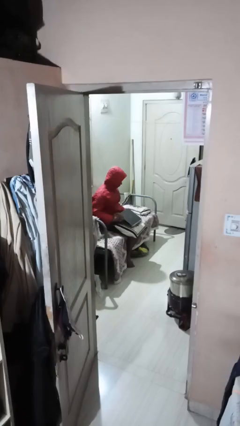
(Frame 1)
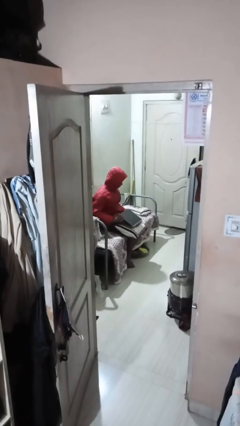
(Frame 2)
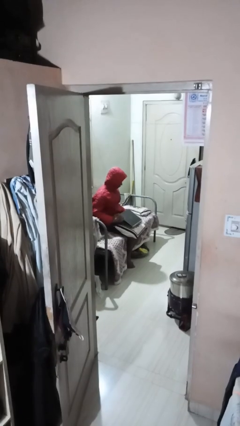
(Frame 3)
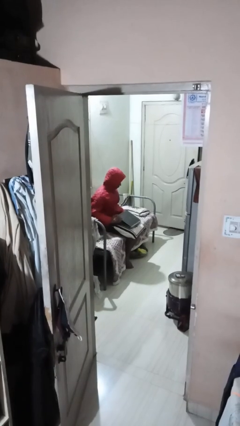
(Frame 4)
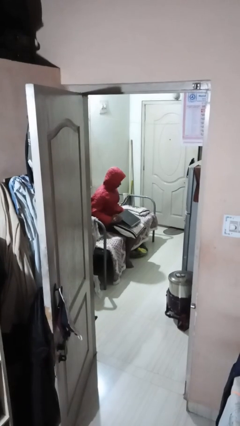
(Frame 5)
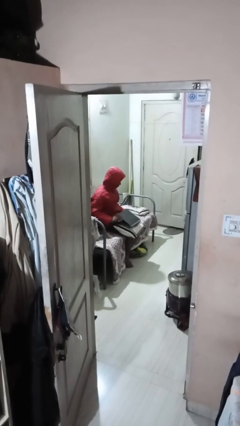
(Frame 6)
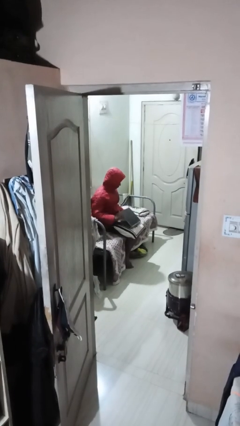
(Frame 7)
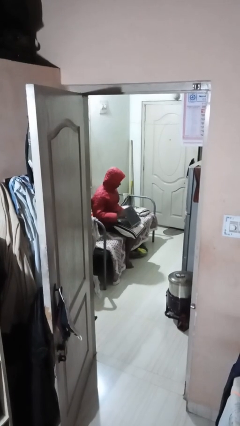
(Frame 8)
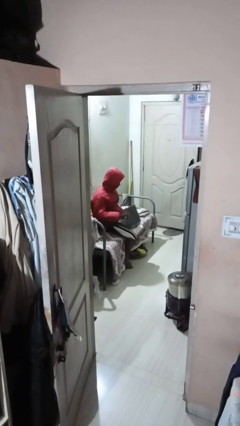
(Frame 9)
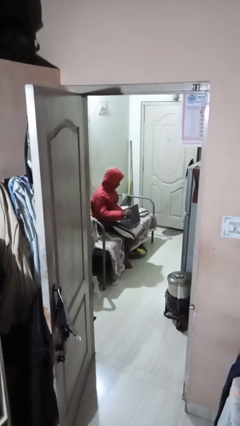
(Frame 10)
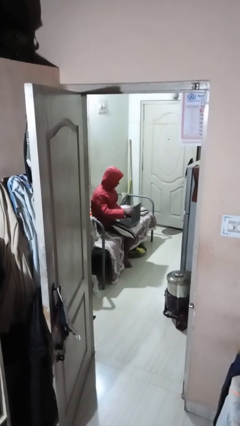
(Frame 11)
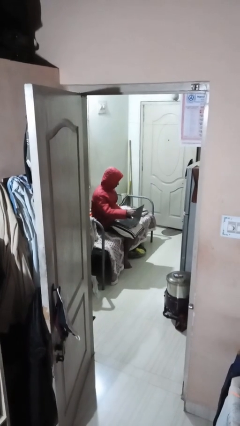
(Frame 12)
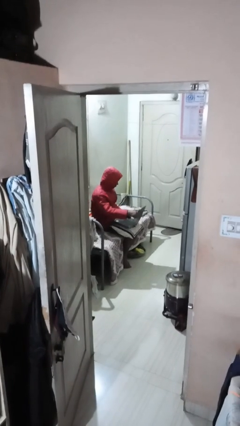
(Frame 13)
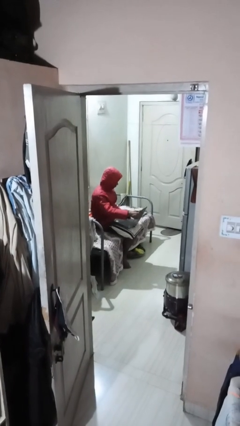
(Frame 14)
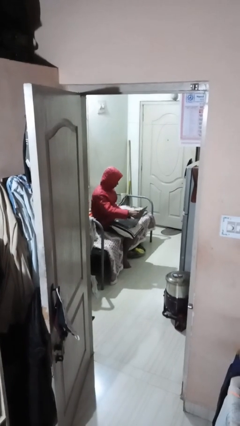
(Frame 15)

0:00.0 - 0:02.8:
person interacts with laptop

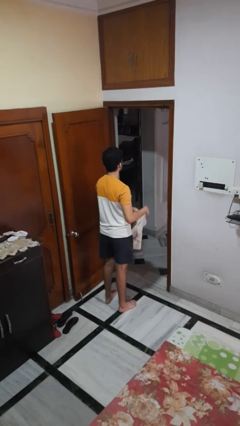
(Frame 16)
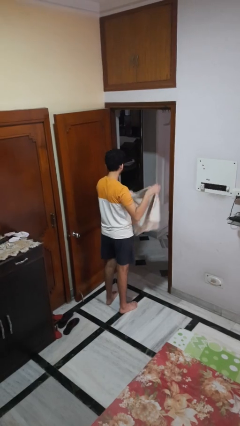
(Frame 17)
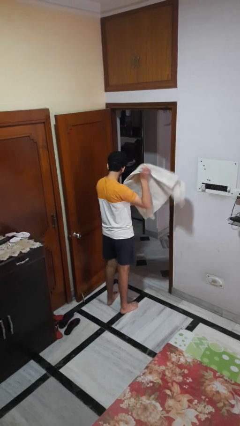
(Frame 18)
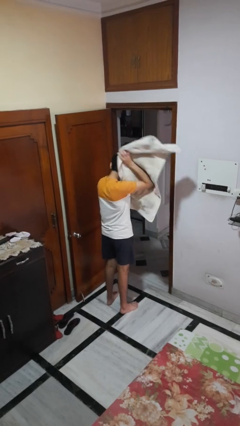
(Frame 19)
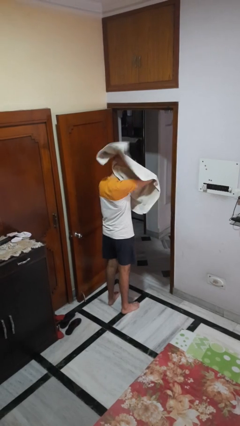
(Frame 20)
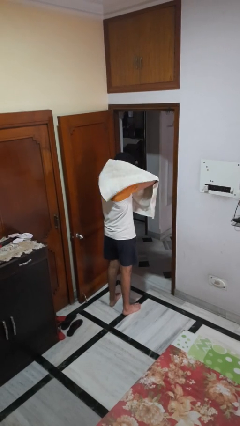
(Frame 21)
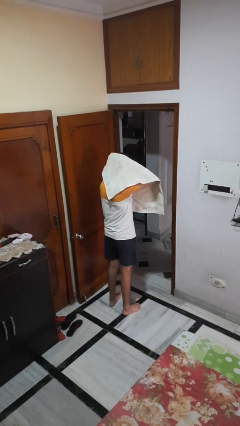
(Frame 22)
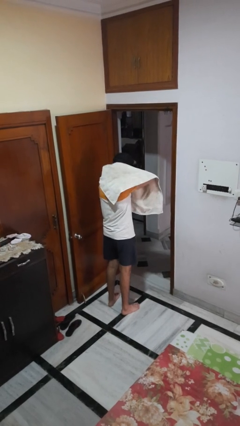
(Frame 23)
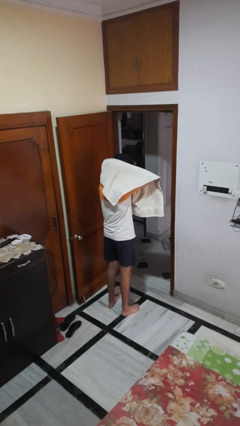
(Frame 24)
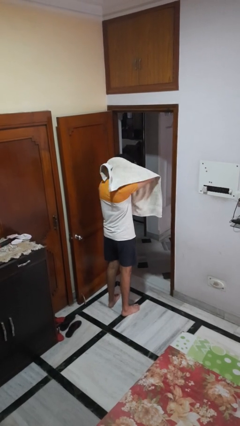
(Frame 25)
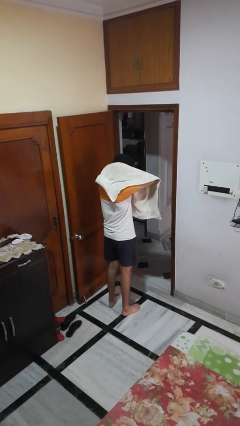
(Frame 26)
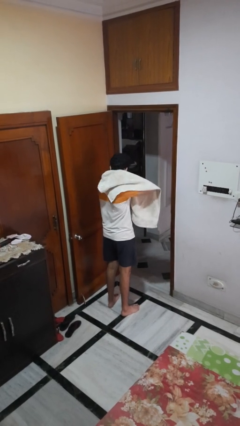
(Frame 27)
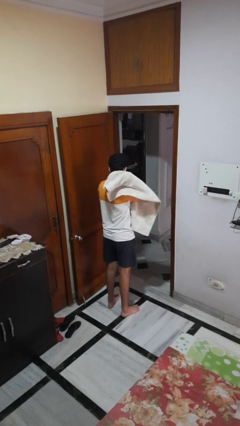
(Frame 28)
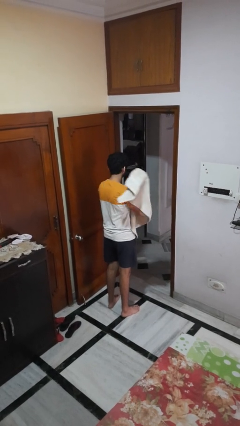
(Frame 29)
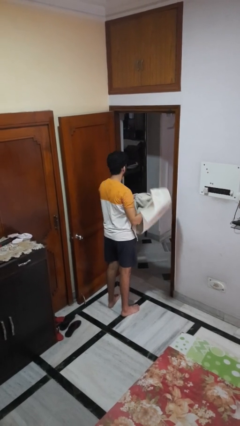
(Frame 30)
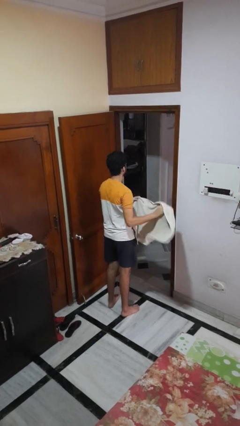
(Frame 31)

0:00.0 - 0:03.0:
person dries hair with towel

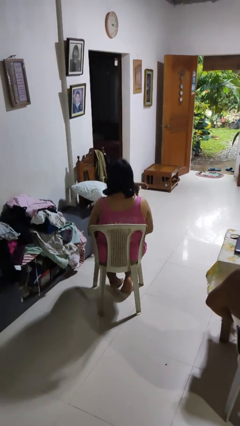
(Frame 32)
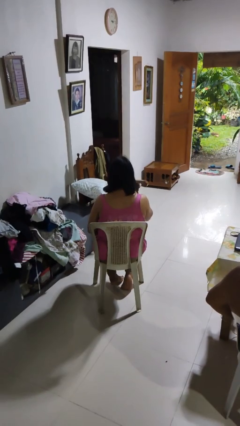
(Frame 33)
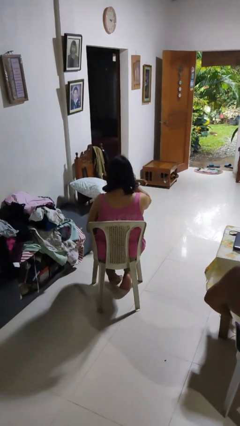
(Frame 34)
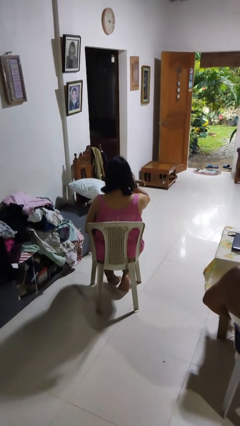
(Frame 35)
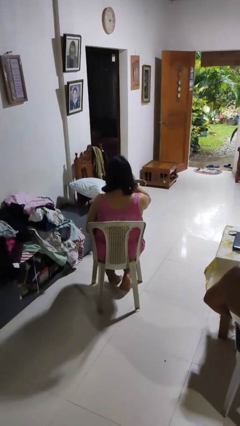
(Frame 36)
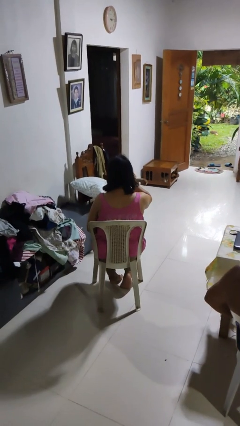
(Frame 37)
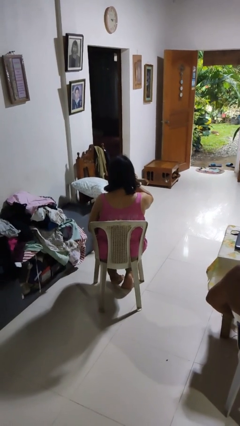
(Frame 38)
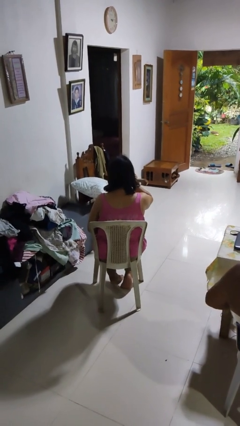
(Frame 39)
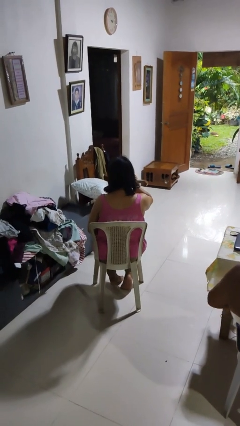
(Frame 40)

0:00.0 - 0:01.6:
person touches earlobe

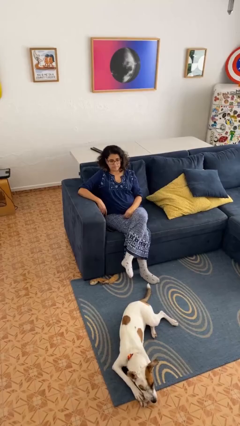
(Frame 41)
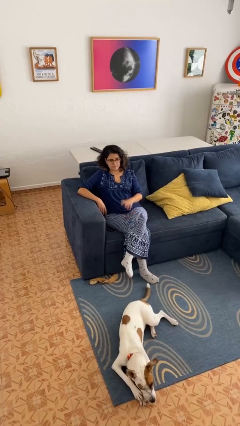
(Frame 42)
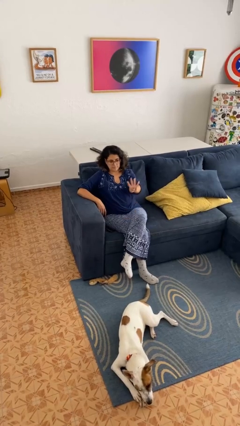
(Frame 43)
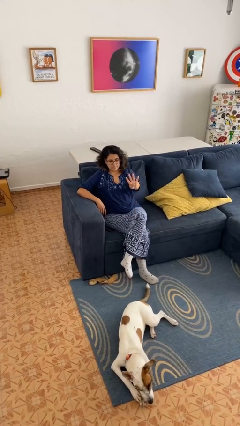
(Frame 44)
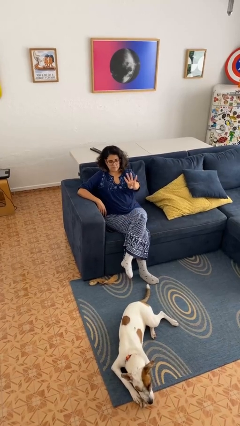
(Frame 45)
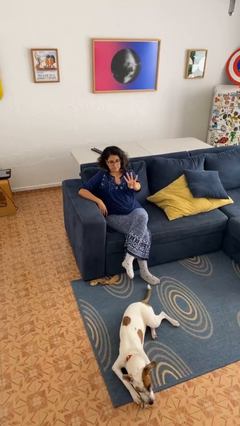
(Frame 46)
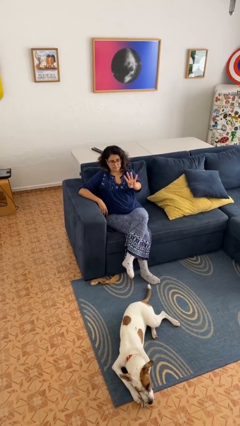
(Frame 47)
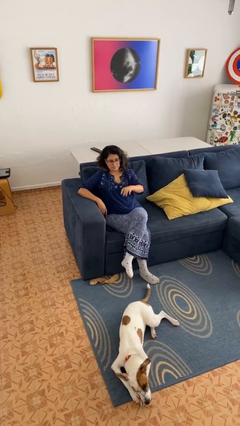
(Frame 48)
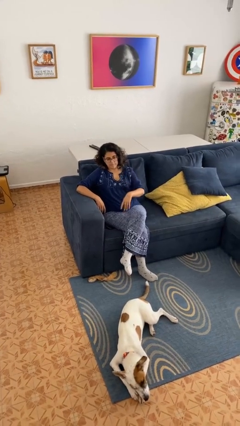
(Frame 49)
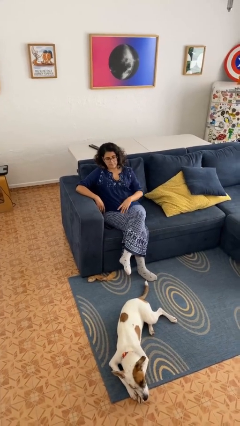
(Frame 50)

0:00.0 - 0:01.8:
person gestures number four

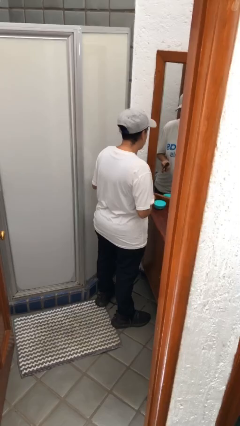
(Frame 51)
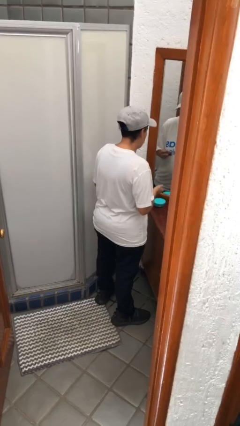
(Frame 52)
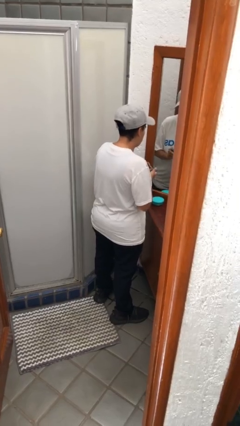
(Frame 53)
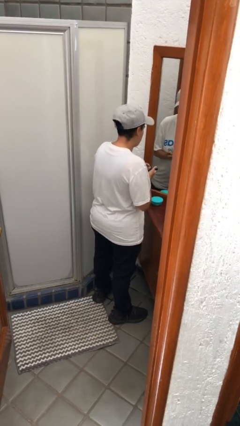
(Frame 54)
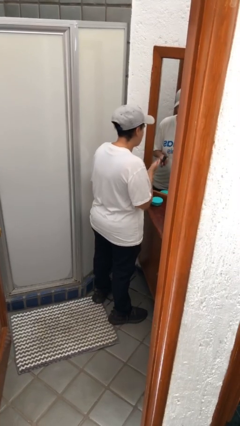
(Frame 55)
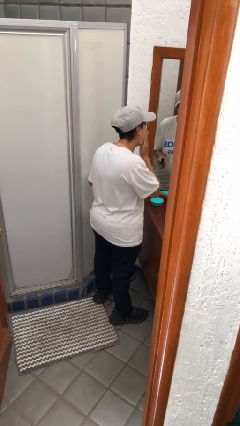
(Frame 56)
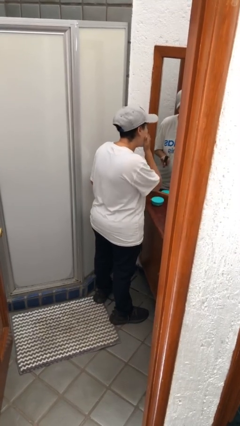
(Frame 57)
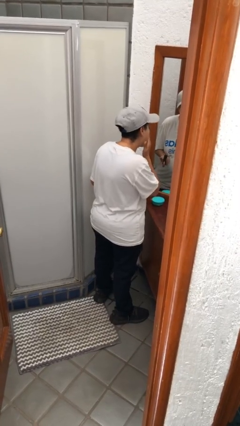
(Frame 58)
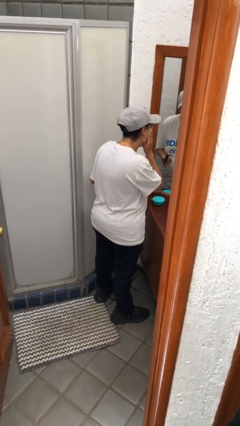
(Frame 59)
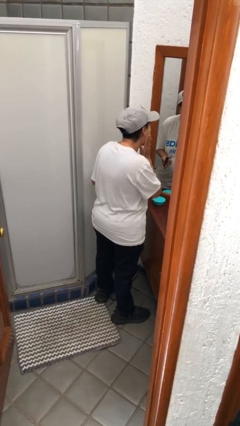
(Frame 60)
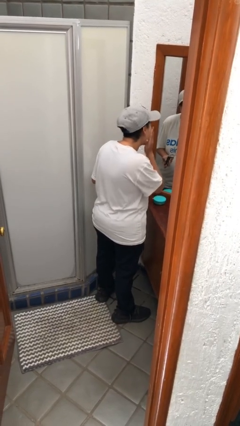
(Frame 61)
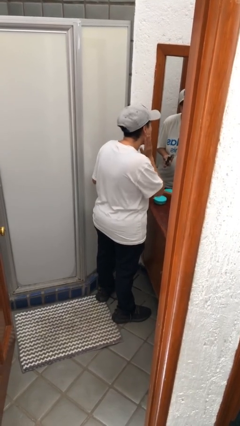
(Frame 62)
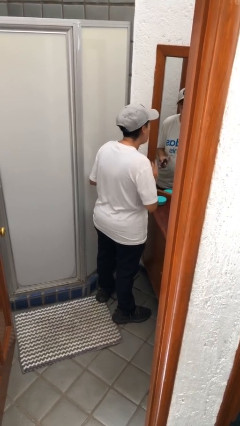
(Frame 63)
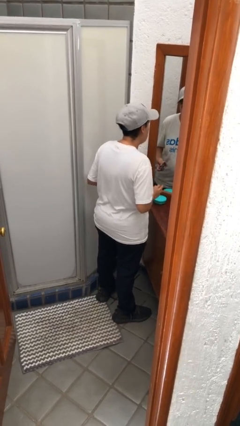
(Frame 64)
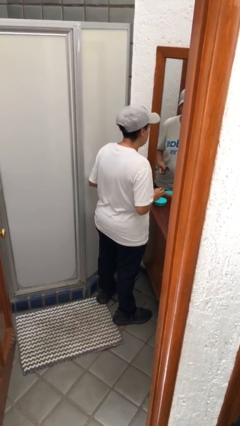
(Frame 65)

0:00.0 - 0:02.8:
person applies facial moisturizer

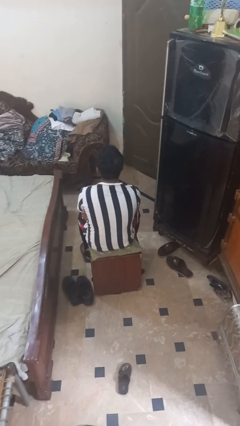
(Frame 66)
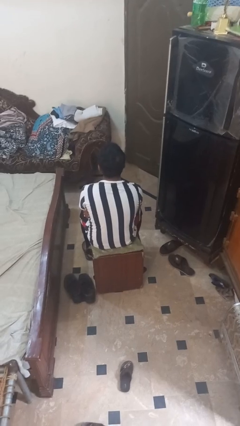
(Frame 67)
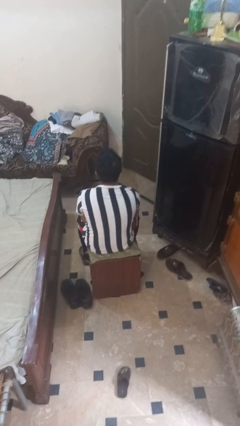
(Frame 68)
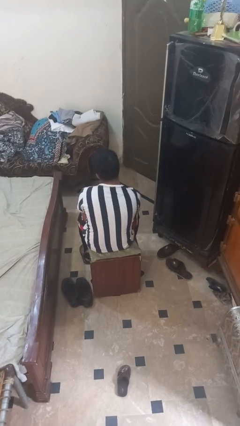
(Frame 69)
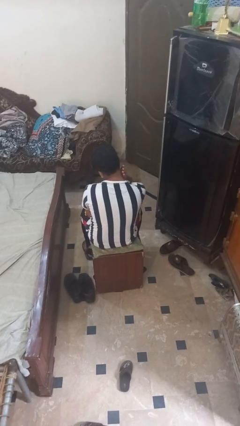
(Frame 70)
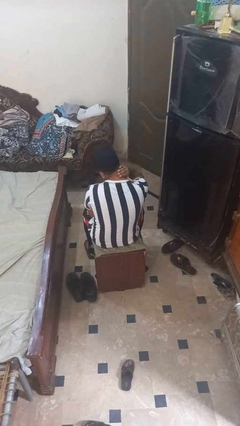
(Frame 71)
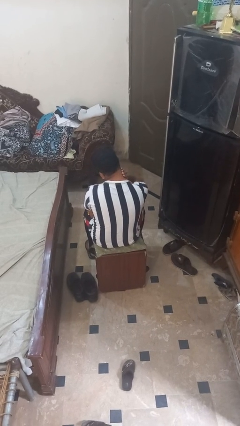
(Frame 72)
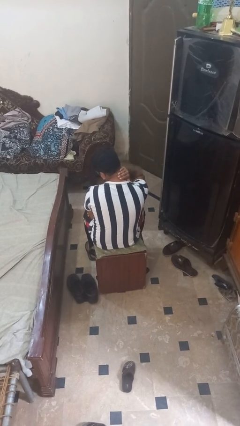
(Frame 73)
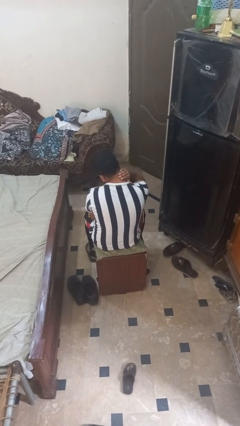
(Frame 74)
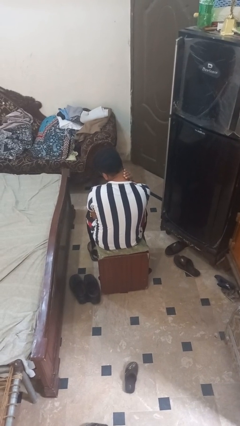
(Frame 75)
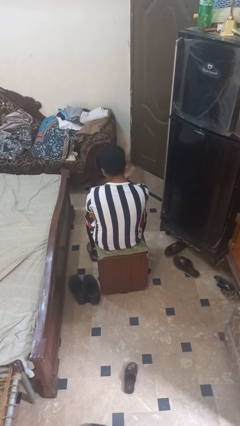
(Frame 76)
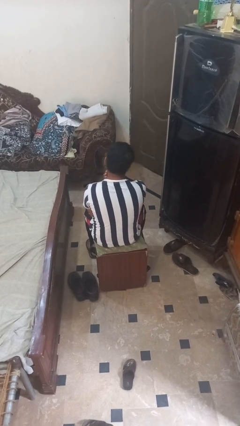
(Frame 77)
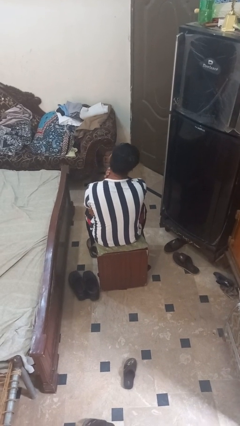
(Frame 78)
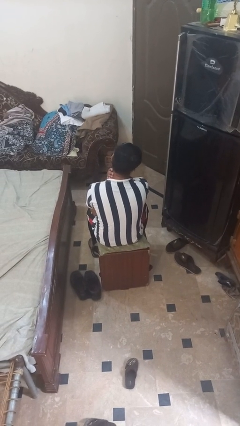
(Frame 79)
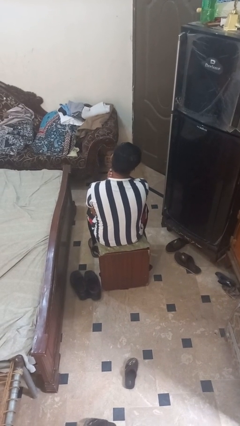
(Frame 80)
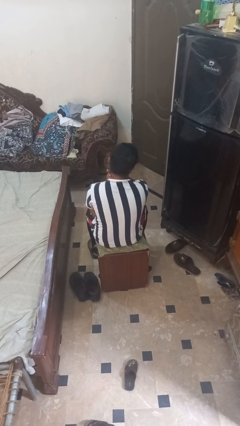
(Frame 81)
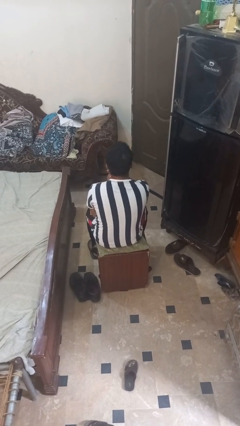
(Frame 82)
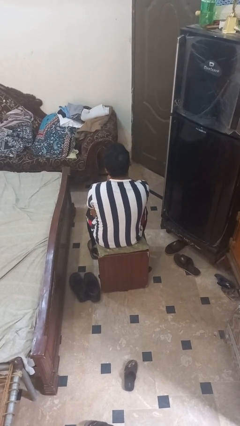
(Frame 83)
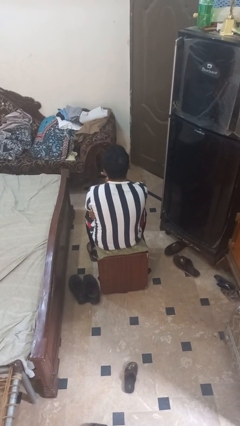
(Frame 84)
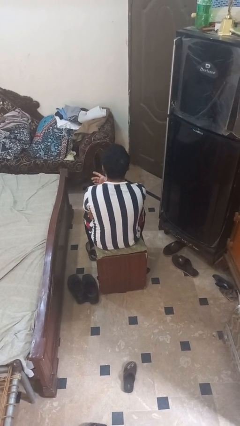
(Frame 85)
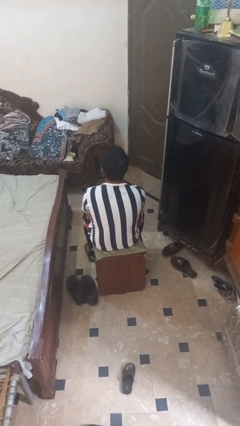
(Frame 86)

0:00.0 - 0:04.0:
person rubs neck

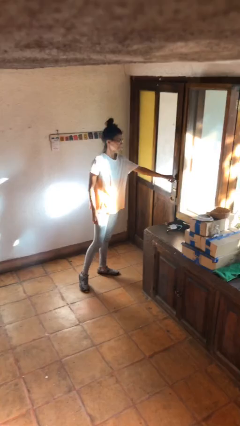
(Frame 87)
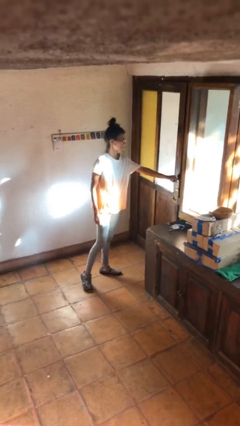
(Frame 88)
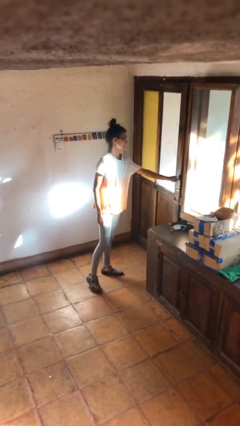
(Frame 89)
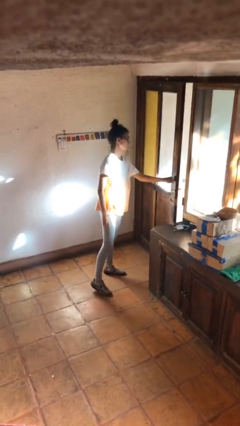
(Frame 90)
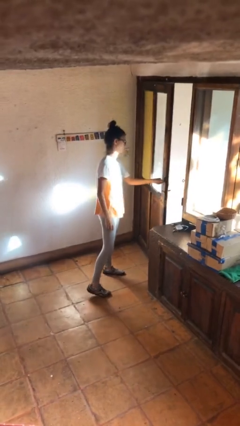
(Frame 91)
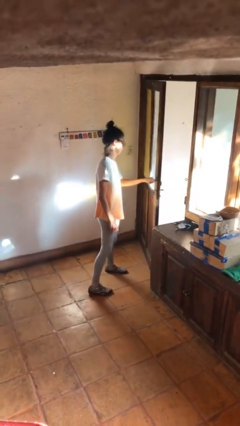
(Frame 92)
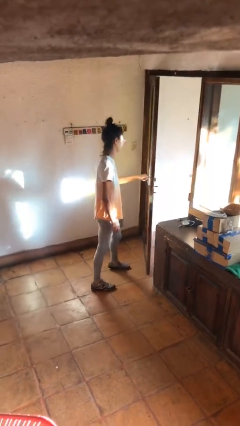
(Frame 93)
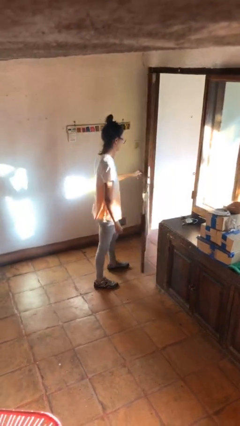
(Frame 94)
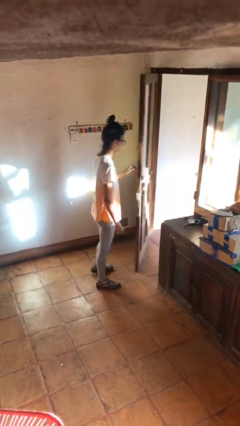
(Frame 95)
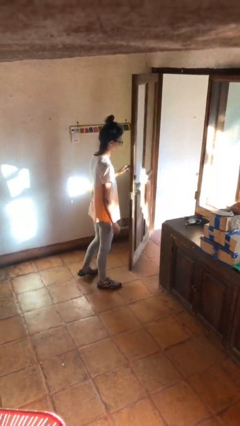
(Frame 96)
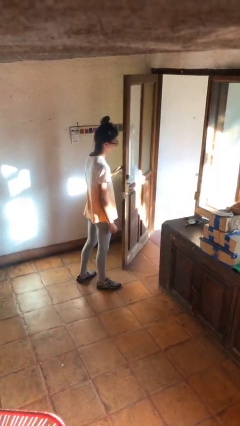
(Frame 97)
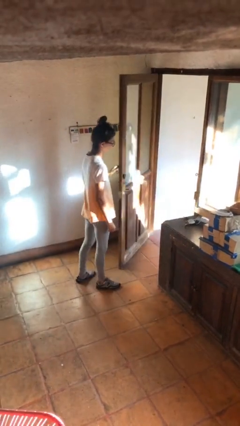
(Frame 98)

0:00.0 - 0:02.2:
person opens facility door
